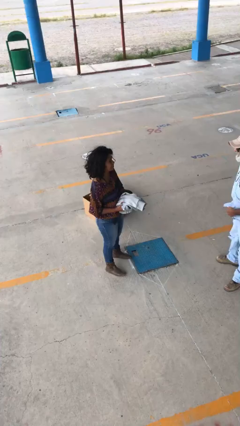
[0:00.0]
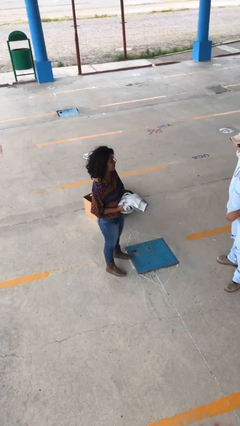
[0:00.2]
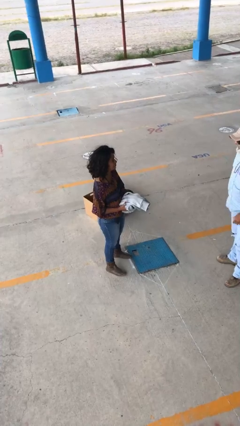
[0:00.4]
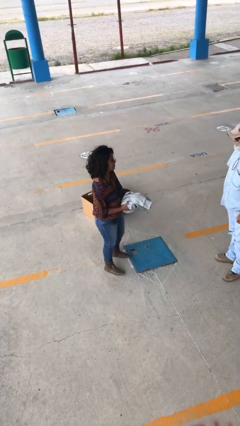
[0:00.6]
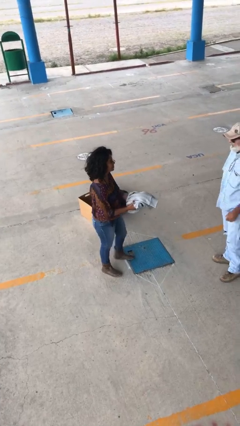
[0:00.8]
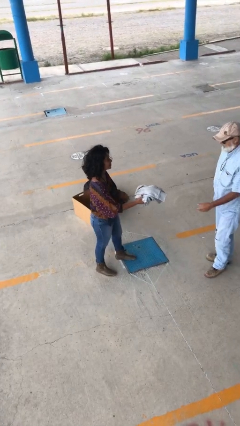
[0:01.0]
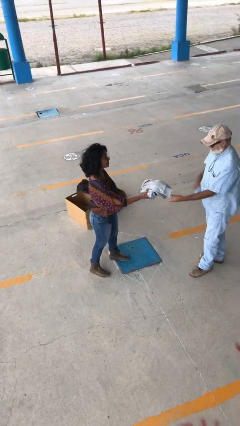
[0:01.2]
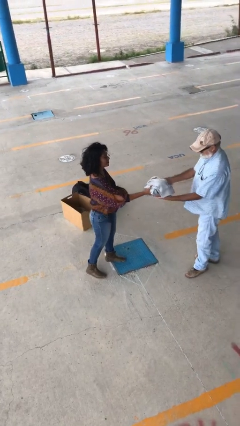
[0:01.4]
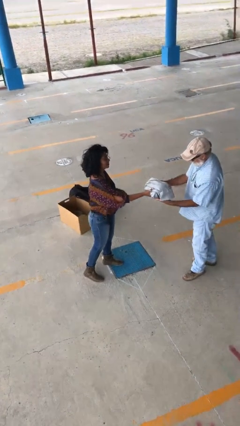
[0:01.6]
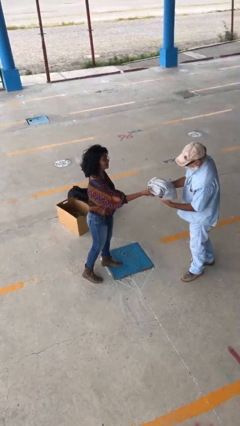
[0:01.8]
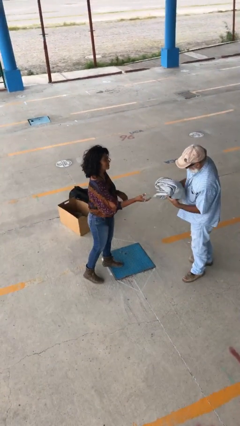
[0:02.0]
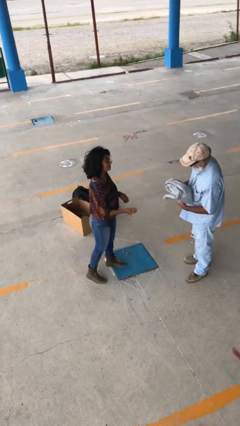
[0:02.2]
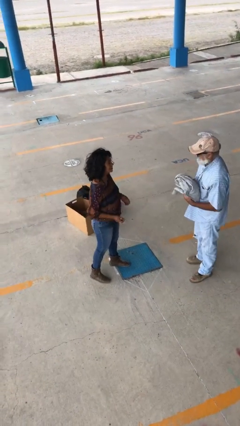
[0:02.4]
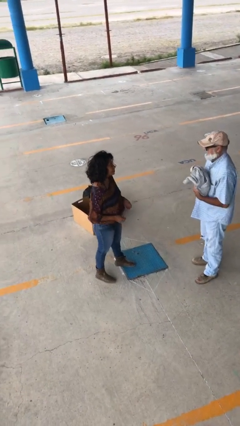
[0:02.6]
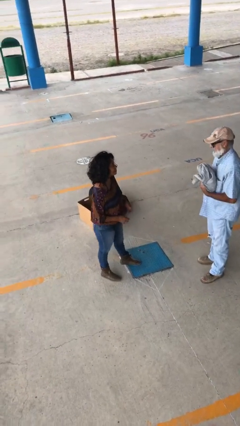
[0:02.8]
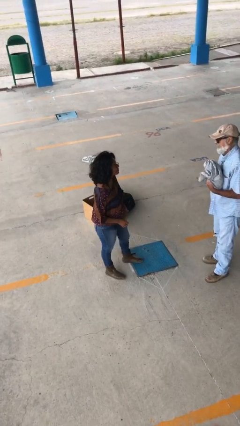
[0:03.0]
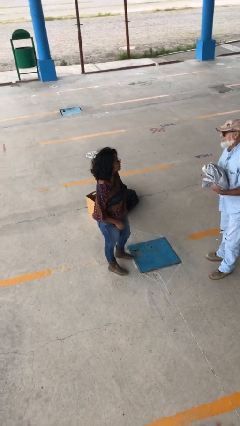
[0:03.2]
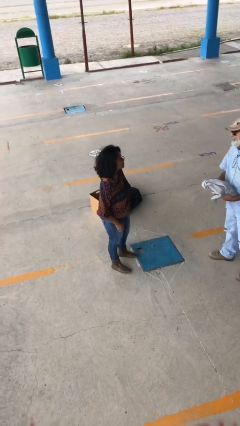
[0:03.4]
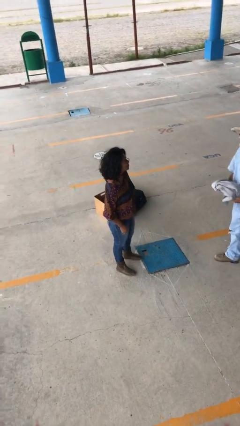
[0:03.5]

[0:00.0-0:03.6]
person transfers object to person

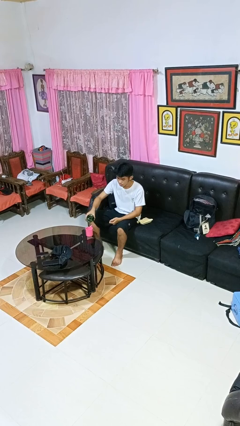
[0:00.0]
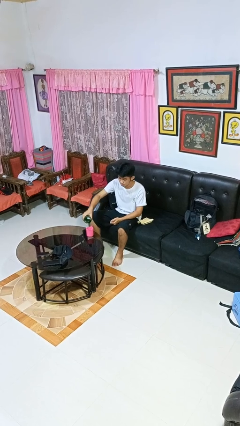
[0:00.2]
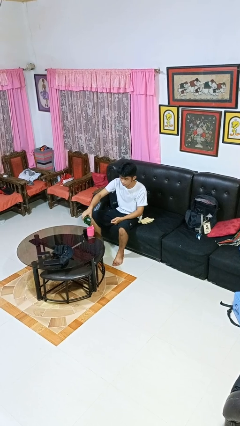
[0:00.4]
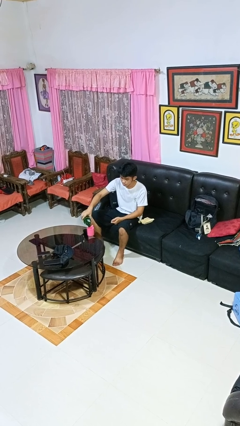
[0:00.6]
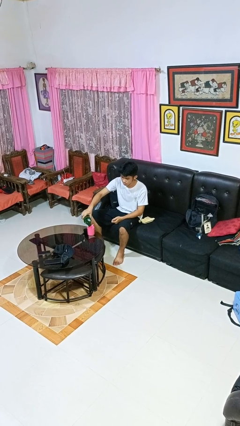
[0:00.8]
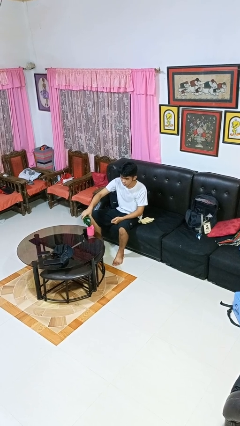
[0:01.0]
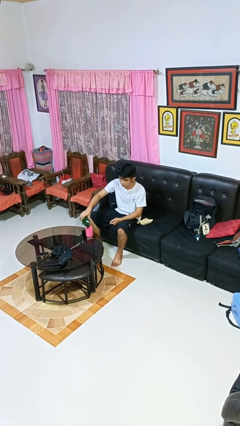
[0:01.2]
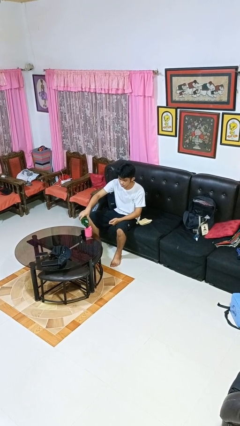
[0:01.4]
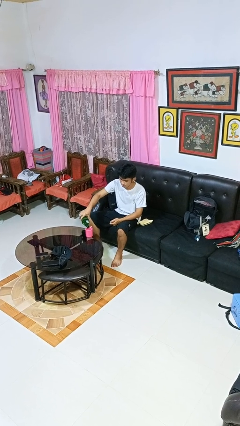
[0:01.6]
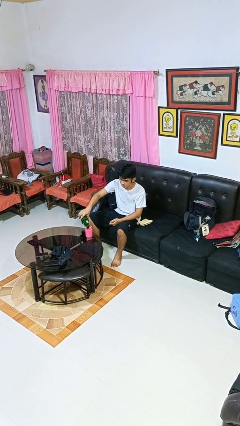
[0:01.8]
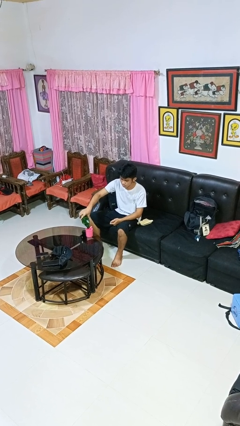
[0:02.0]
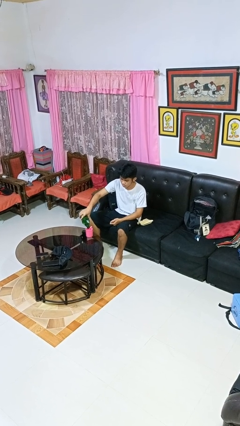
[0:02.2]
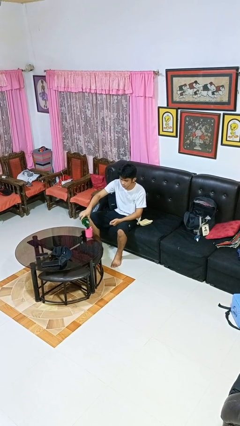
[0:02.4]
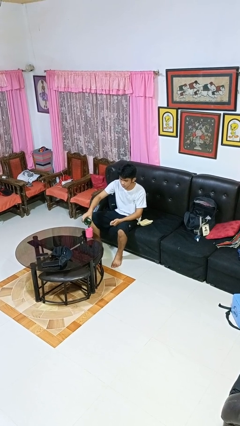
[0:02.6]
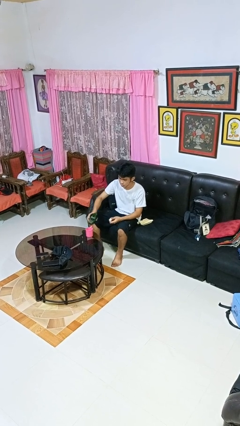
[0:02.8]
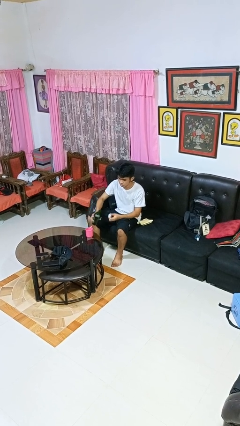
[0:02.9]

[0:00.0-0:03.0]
person pours liquid into cup

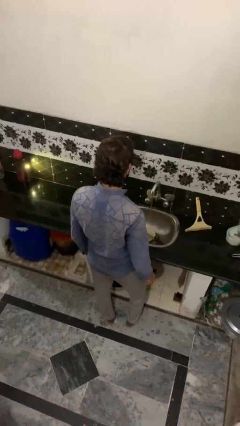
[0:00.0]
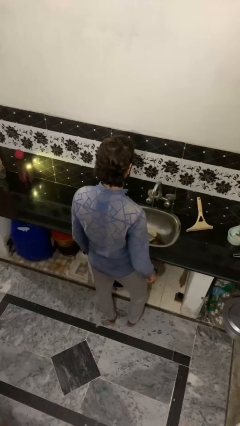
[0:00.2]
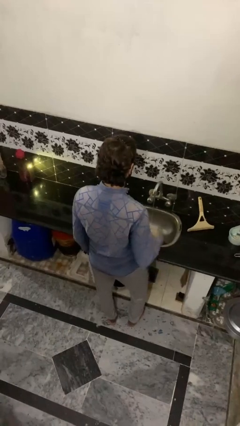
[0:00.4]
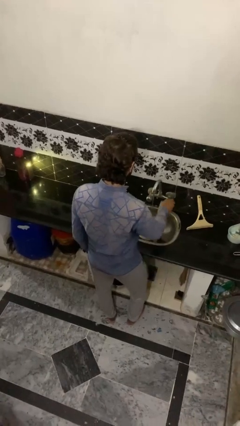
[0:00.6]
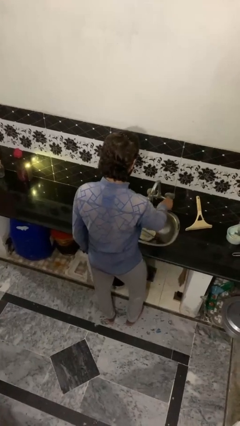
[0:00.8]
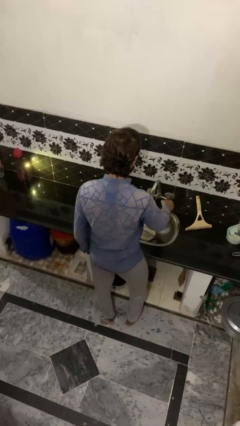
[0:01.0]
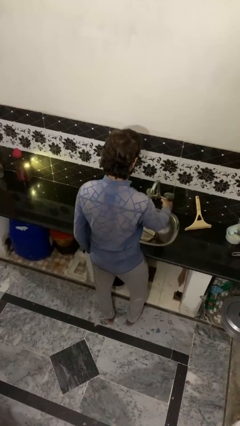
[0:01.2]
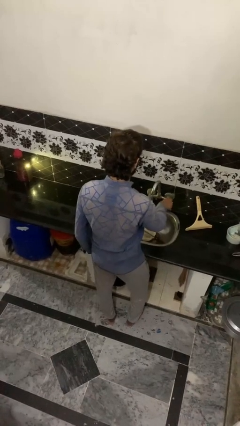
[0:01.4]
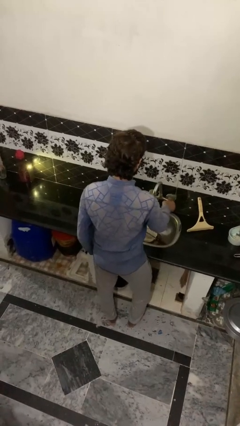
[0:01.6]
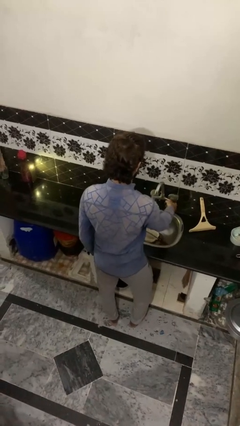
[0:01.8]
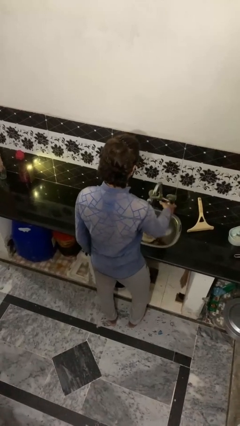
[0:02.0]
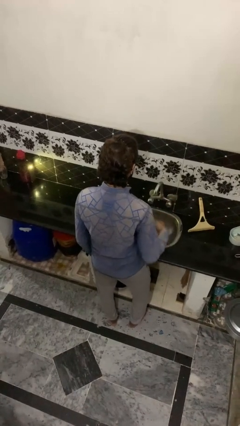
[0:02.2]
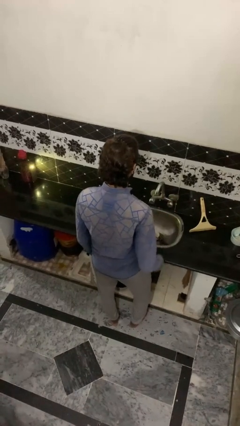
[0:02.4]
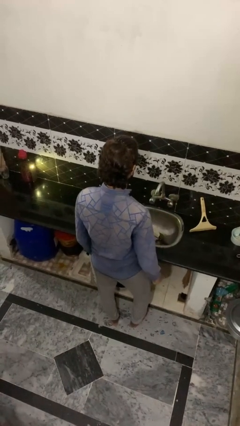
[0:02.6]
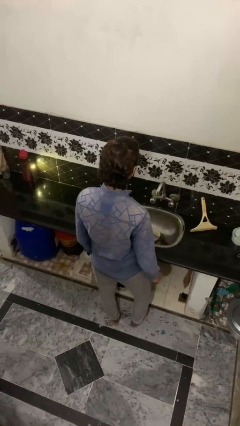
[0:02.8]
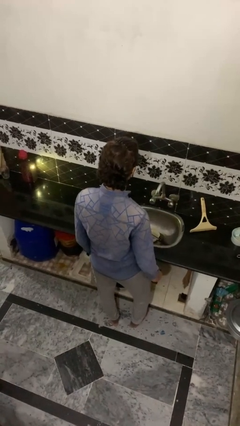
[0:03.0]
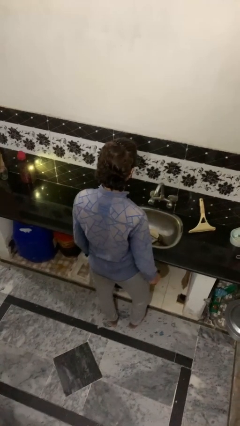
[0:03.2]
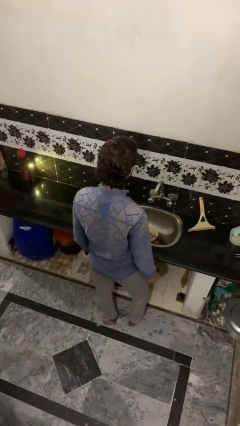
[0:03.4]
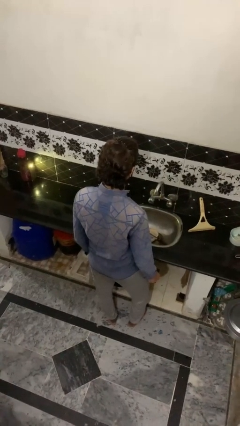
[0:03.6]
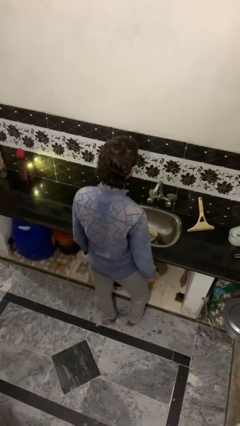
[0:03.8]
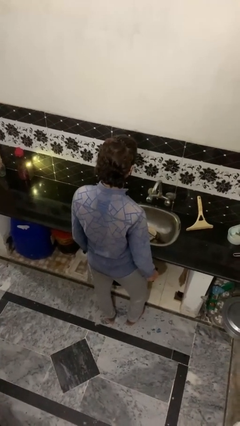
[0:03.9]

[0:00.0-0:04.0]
person turns off faucet

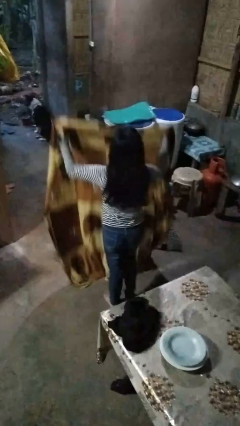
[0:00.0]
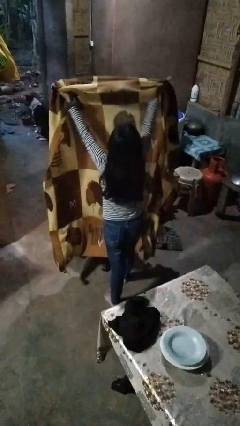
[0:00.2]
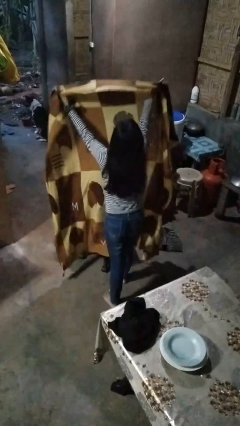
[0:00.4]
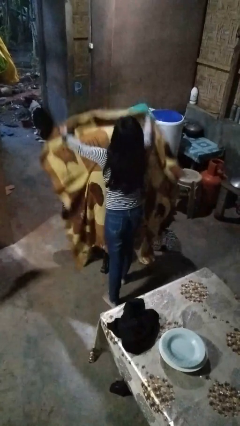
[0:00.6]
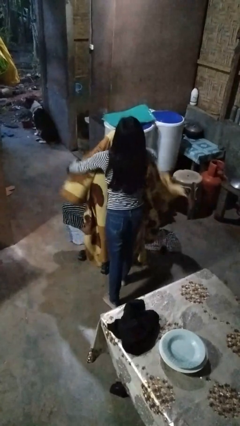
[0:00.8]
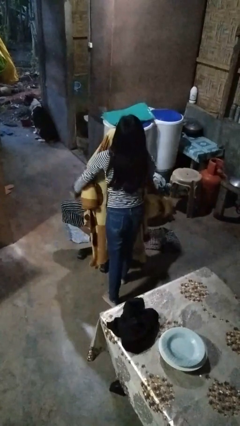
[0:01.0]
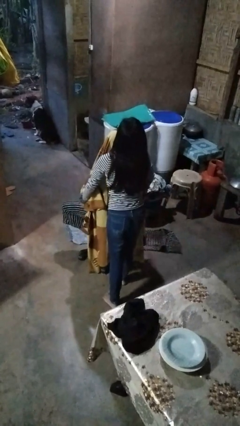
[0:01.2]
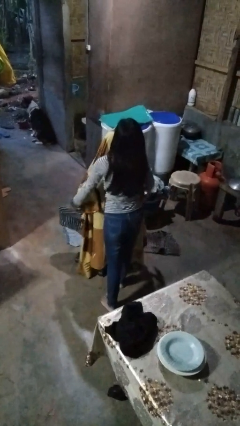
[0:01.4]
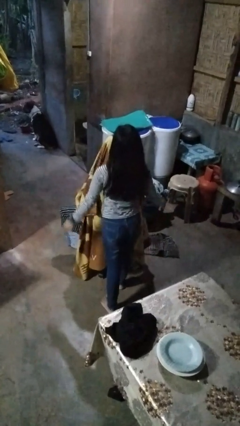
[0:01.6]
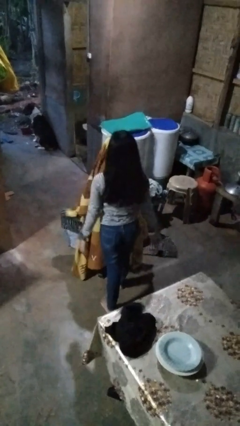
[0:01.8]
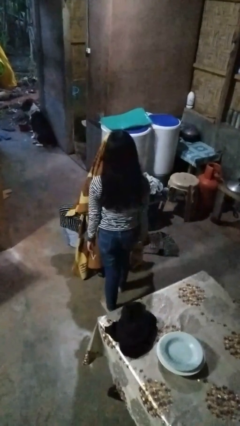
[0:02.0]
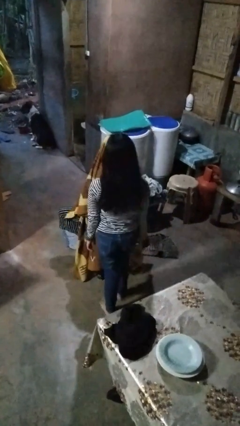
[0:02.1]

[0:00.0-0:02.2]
person covers friend with blanket

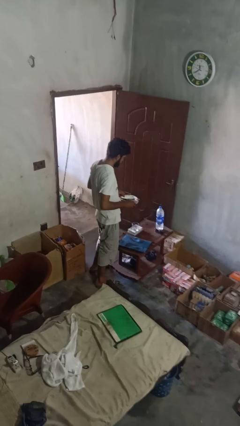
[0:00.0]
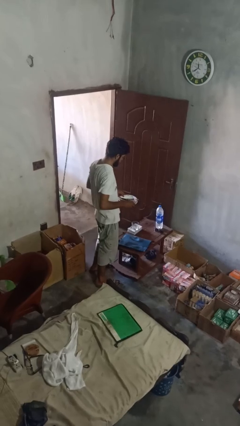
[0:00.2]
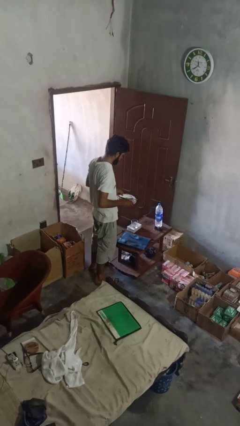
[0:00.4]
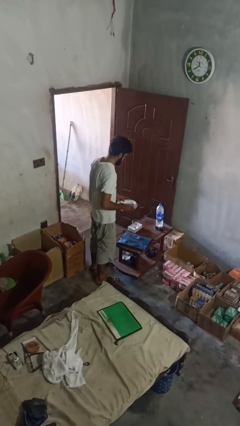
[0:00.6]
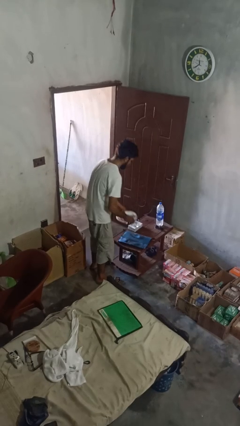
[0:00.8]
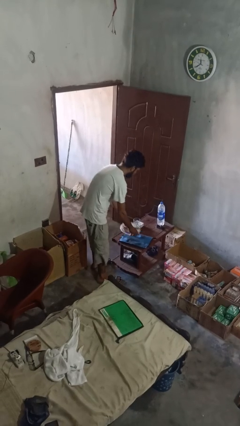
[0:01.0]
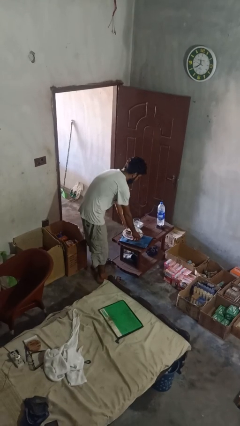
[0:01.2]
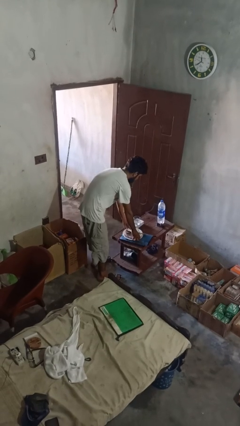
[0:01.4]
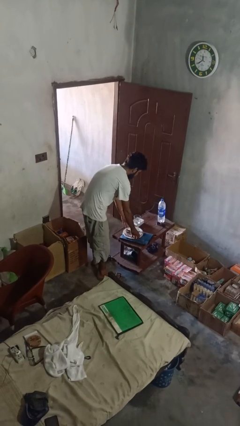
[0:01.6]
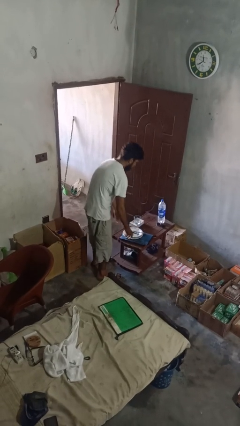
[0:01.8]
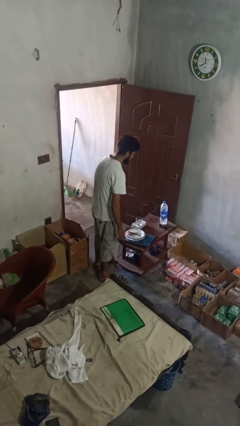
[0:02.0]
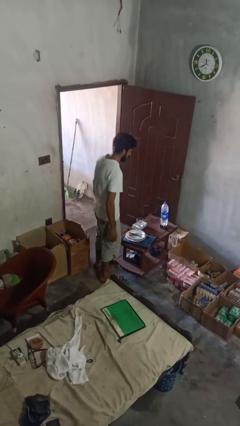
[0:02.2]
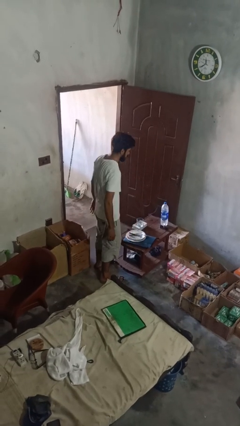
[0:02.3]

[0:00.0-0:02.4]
person puts down object on countertop

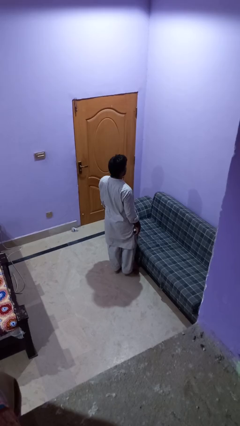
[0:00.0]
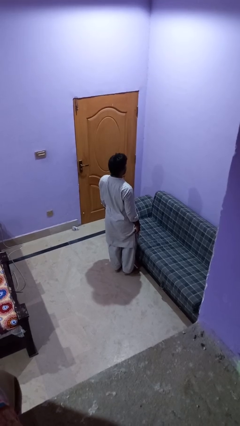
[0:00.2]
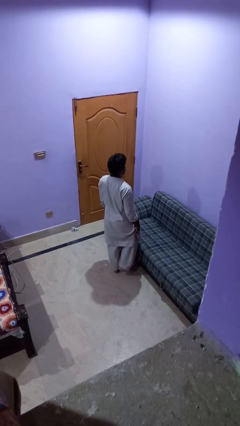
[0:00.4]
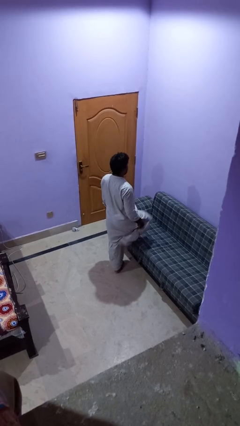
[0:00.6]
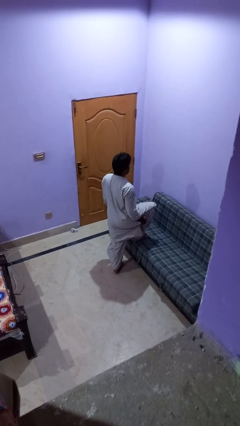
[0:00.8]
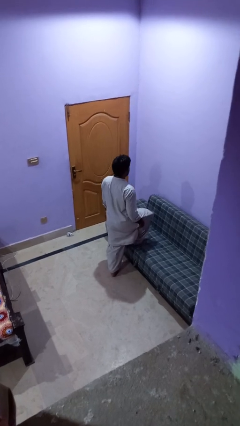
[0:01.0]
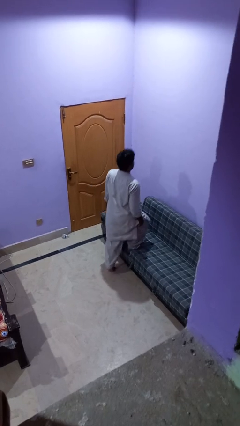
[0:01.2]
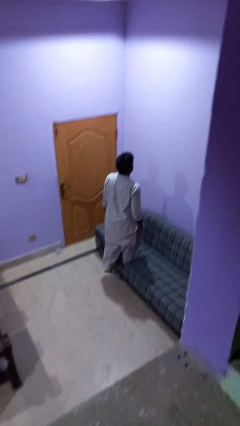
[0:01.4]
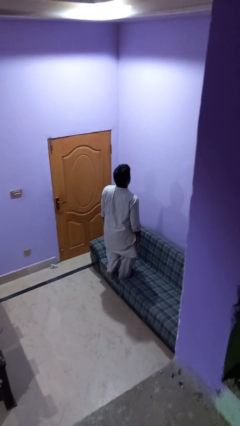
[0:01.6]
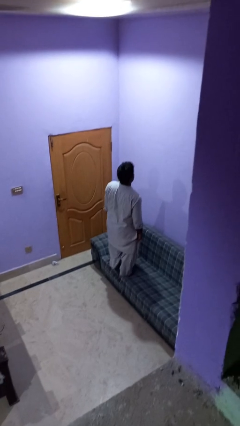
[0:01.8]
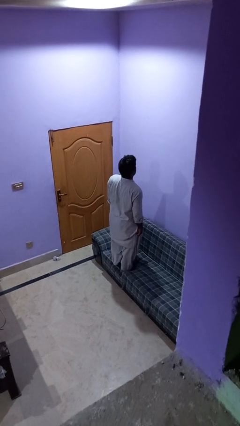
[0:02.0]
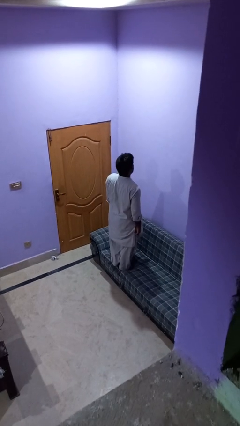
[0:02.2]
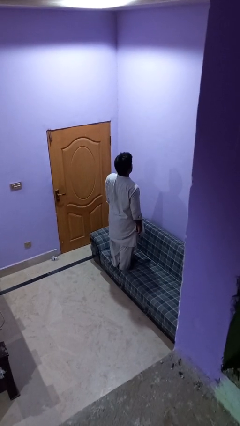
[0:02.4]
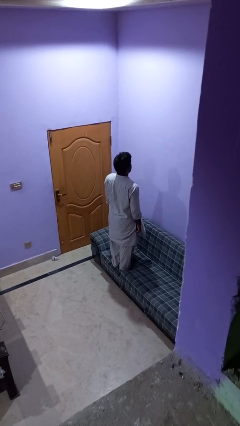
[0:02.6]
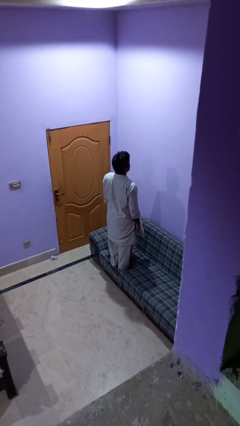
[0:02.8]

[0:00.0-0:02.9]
person climbs on couch
